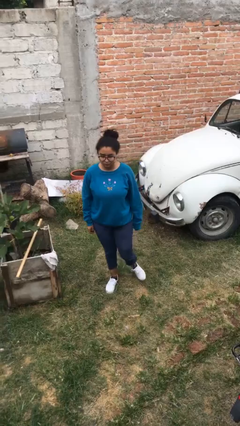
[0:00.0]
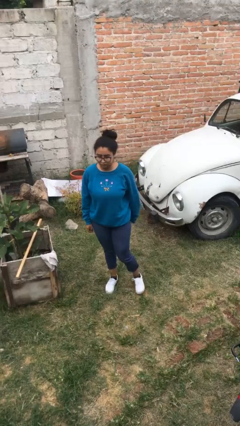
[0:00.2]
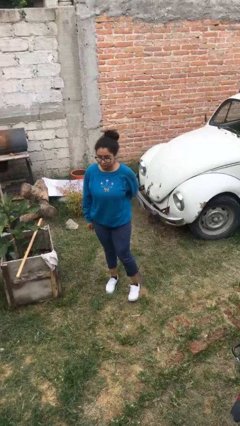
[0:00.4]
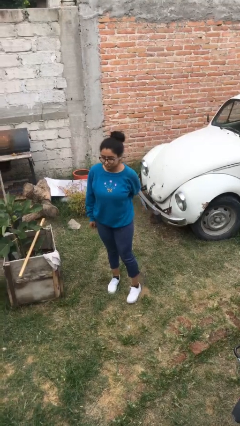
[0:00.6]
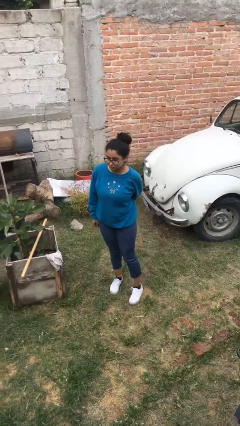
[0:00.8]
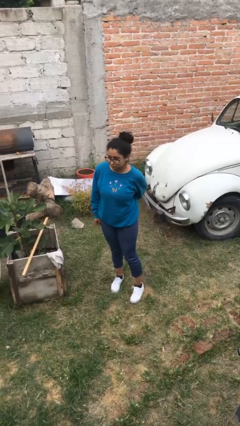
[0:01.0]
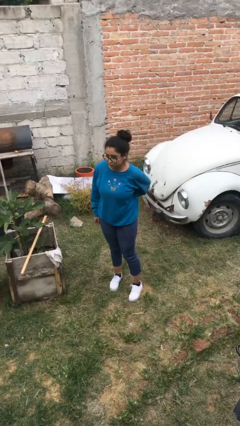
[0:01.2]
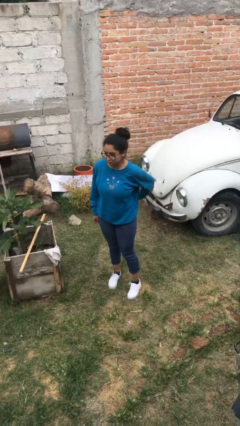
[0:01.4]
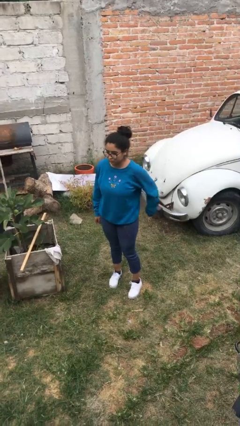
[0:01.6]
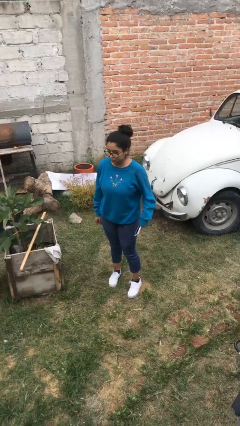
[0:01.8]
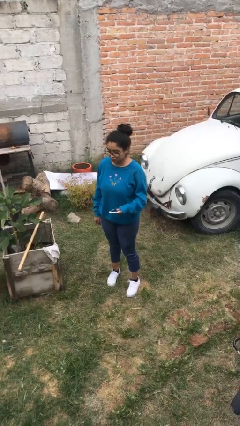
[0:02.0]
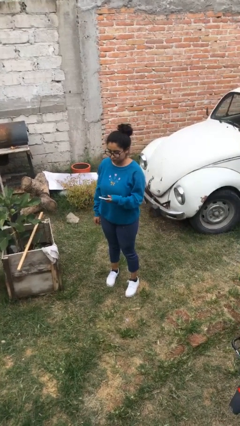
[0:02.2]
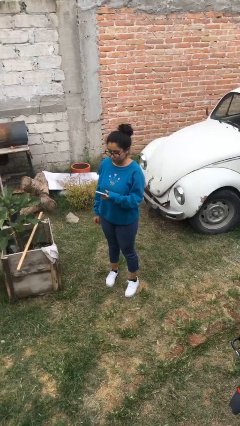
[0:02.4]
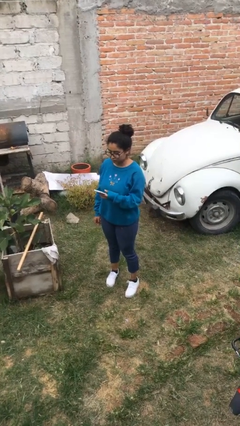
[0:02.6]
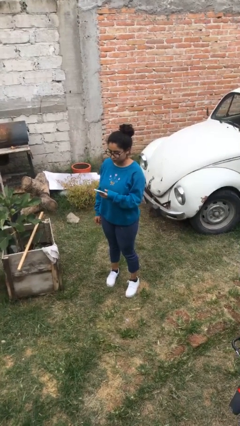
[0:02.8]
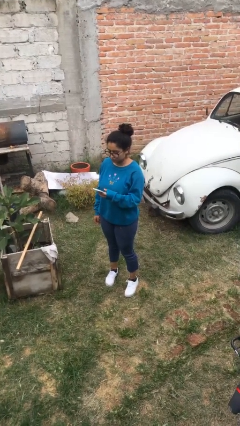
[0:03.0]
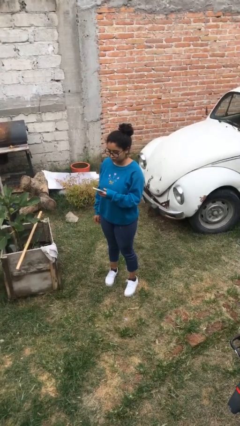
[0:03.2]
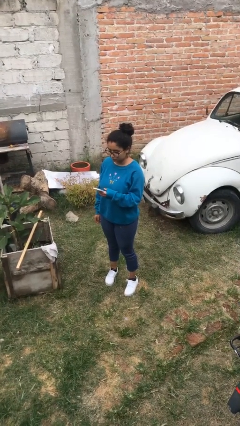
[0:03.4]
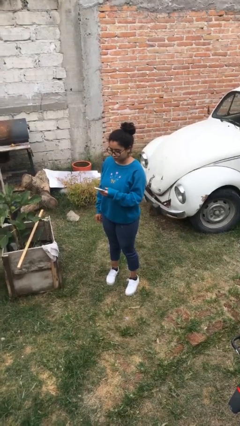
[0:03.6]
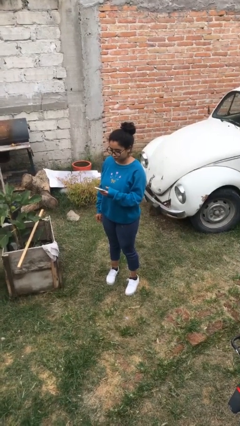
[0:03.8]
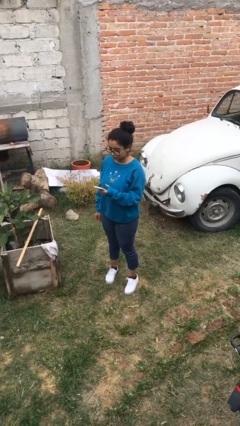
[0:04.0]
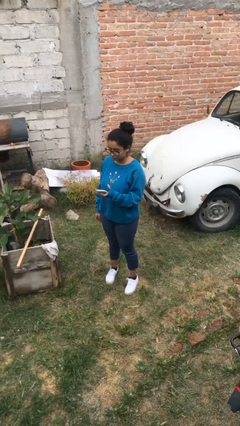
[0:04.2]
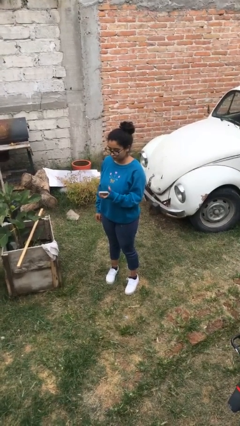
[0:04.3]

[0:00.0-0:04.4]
person takes phone from pocket

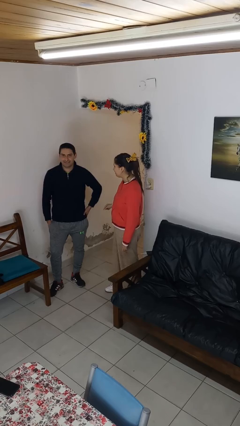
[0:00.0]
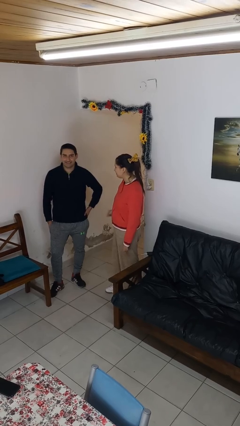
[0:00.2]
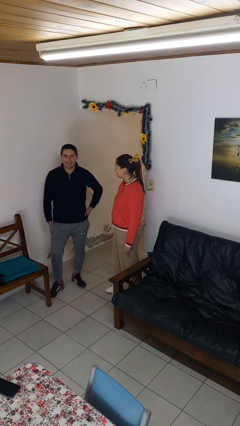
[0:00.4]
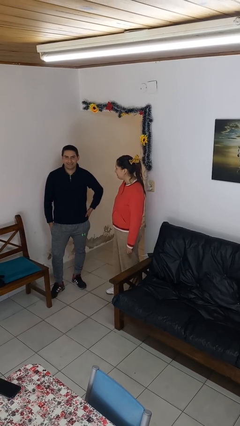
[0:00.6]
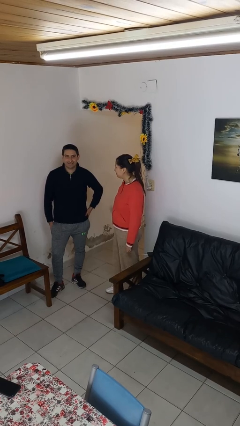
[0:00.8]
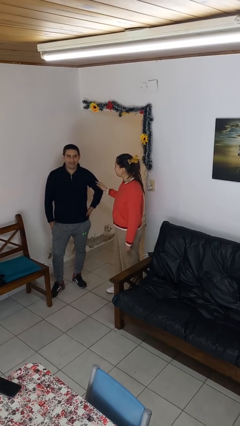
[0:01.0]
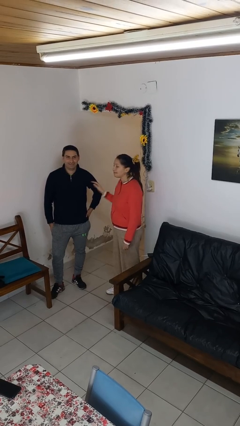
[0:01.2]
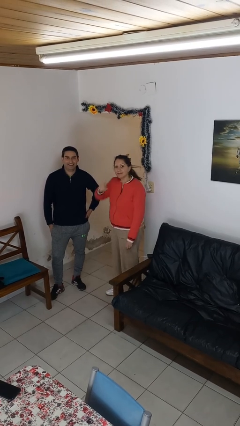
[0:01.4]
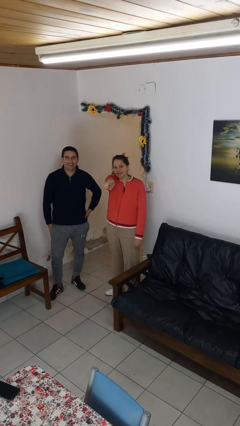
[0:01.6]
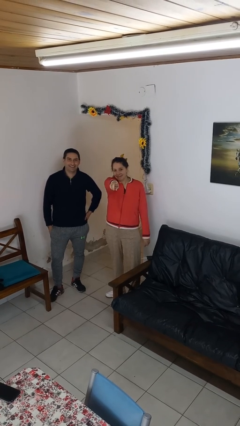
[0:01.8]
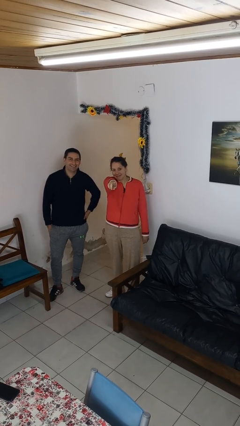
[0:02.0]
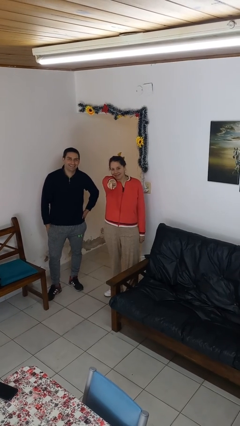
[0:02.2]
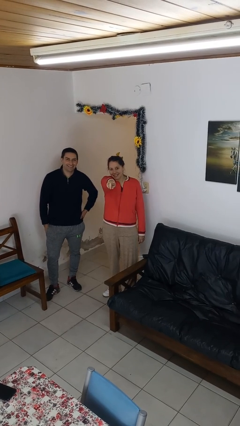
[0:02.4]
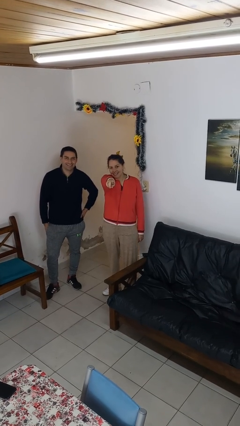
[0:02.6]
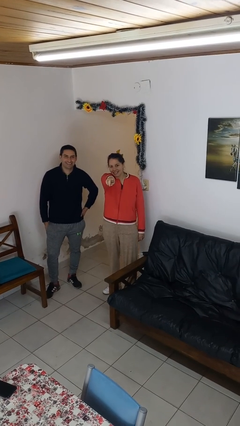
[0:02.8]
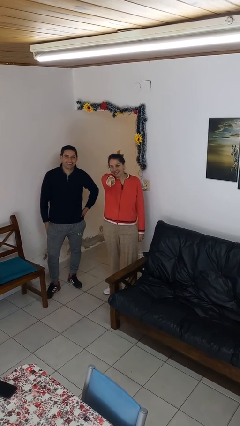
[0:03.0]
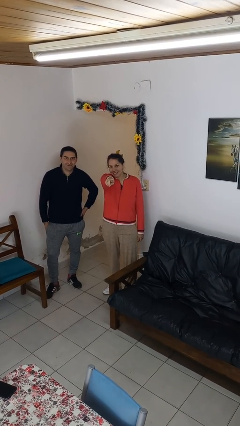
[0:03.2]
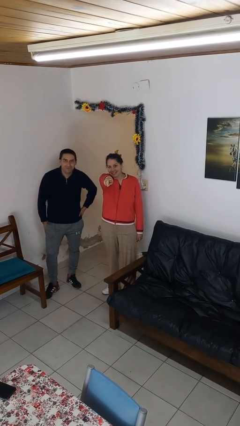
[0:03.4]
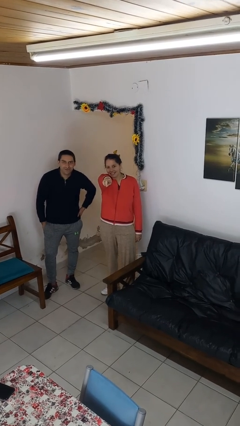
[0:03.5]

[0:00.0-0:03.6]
person points at person

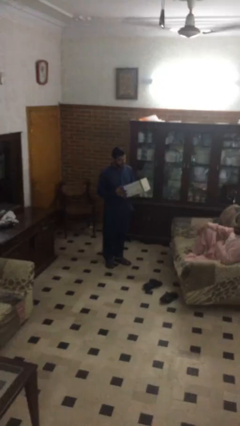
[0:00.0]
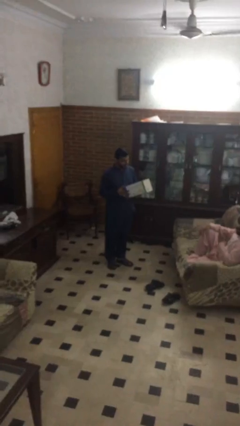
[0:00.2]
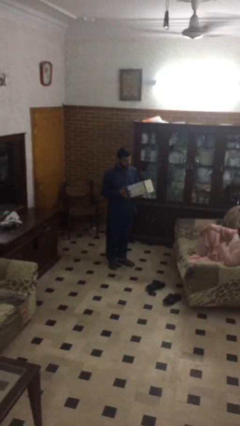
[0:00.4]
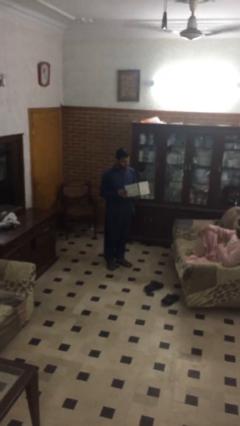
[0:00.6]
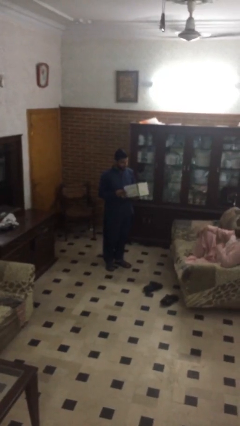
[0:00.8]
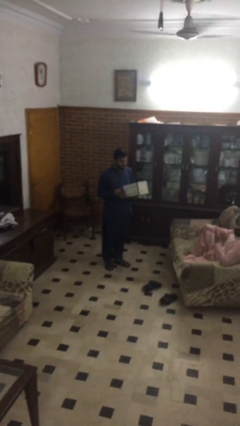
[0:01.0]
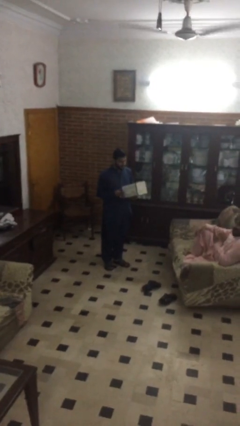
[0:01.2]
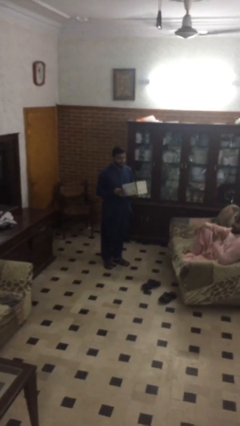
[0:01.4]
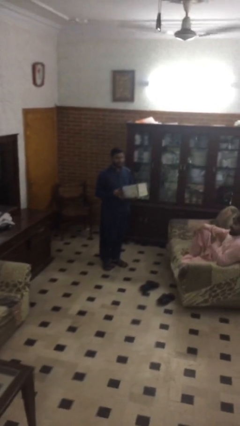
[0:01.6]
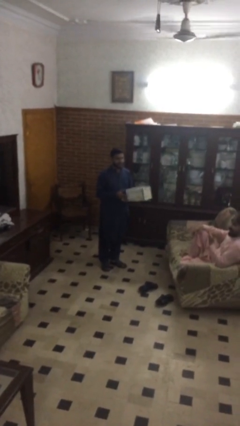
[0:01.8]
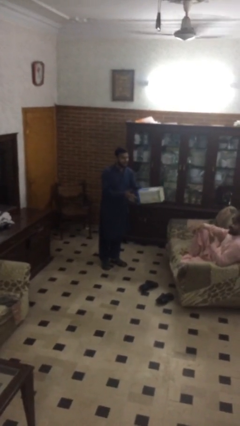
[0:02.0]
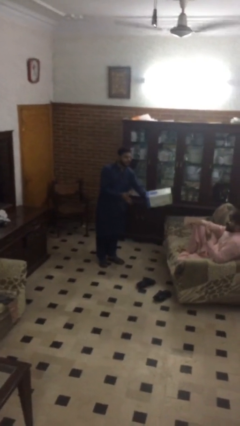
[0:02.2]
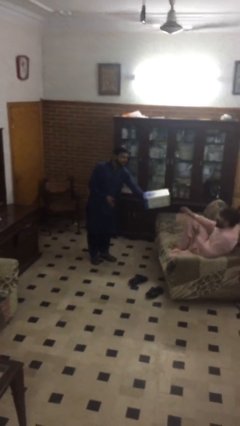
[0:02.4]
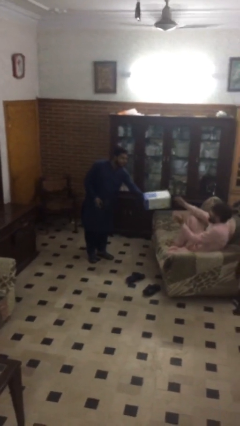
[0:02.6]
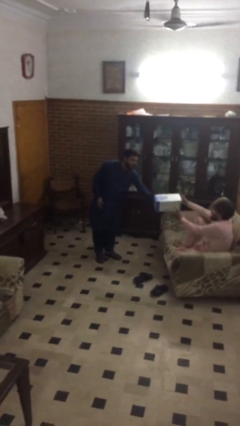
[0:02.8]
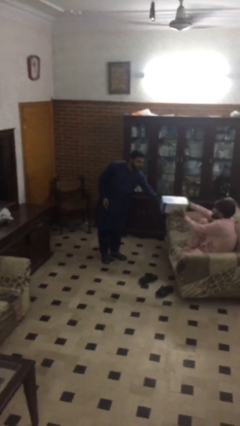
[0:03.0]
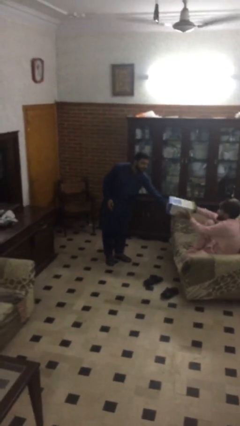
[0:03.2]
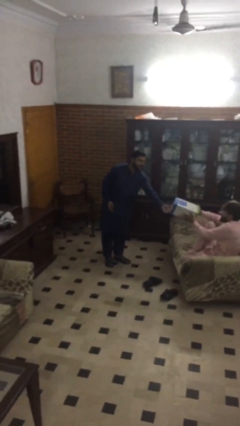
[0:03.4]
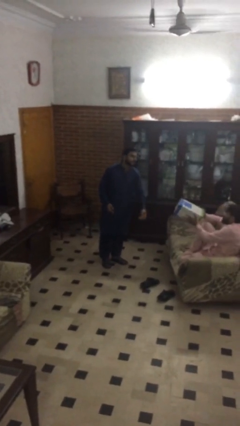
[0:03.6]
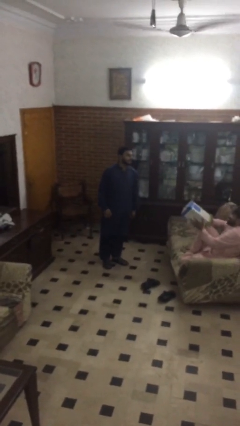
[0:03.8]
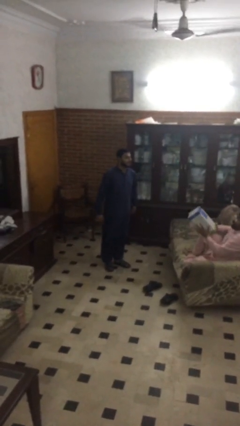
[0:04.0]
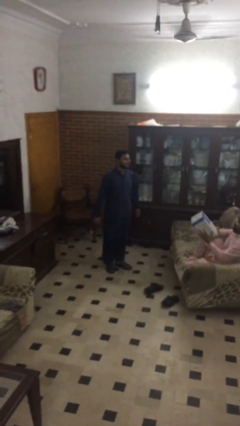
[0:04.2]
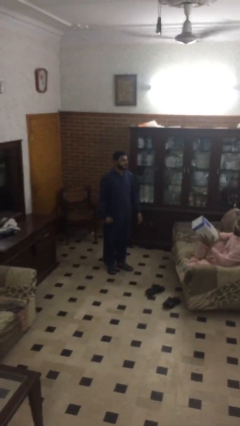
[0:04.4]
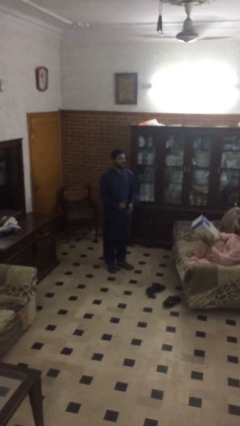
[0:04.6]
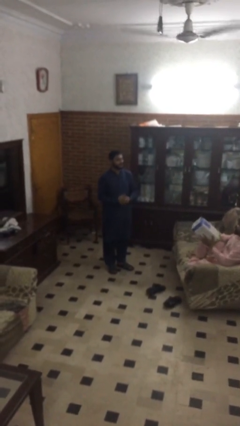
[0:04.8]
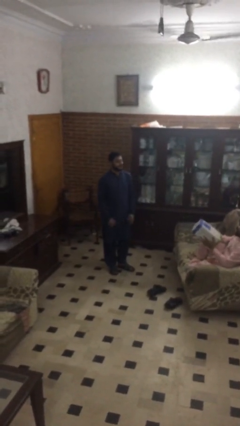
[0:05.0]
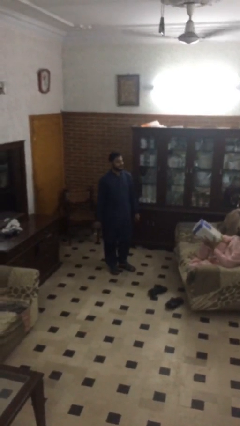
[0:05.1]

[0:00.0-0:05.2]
person transfers object to person

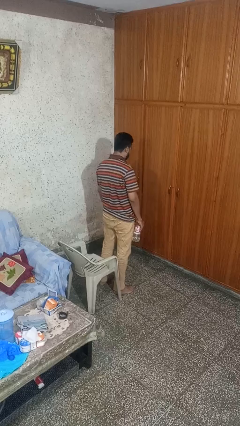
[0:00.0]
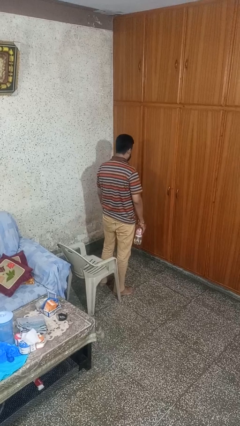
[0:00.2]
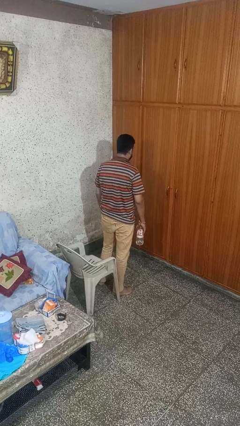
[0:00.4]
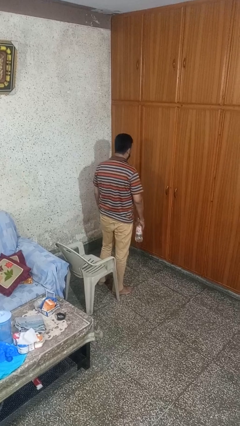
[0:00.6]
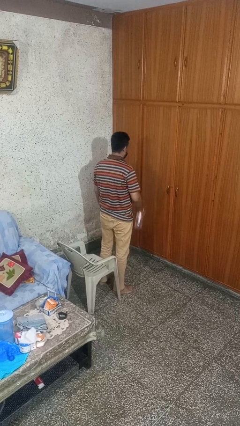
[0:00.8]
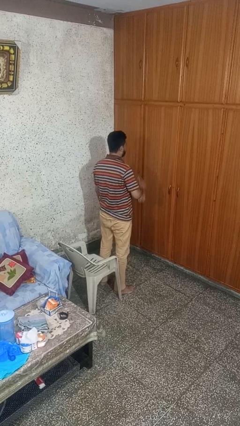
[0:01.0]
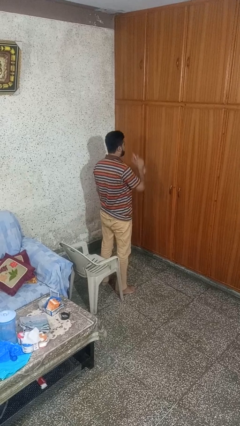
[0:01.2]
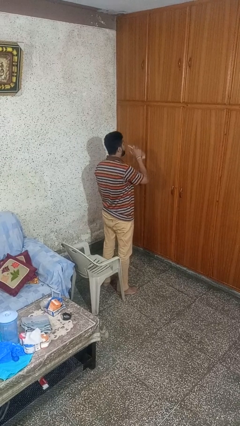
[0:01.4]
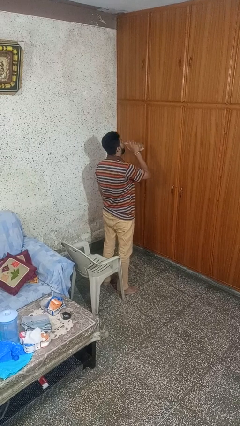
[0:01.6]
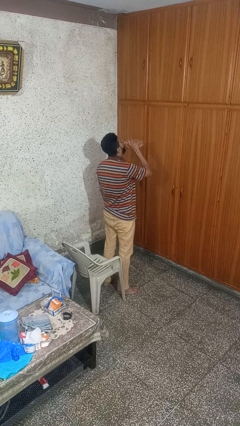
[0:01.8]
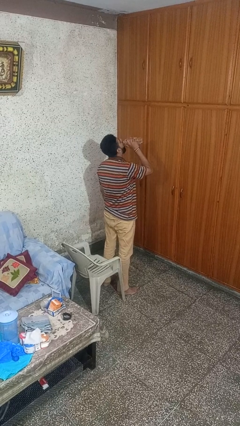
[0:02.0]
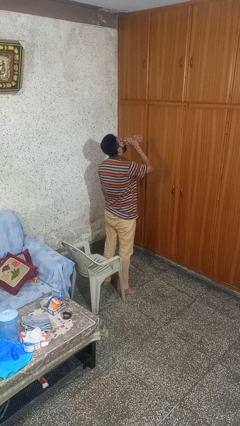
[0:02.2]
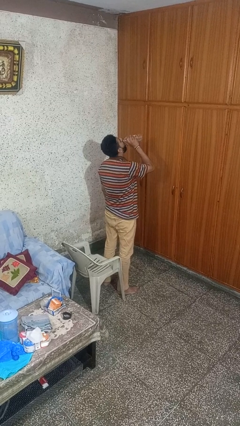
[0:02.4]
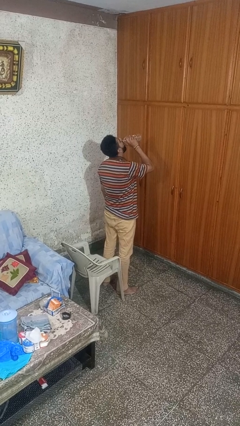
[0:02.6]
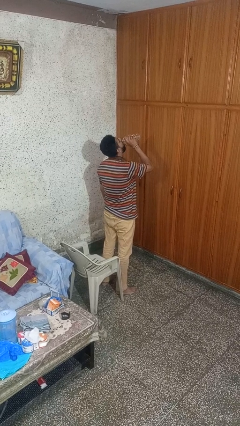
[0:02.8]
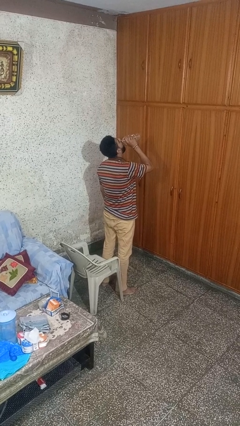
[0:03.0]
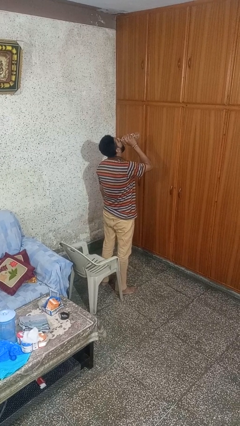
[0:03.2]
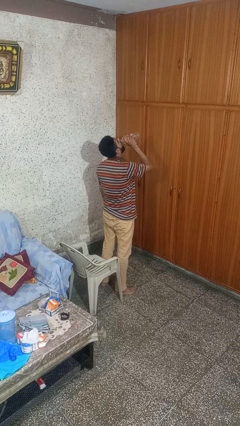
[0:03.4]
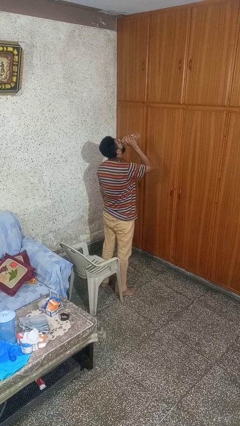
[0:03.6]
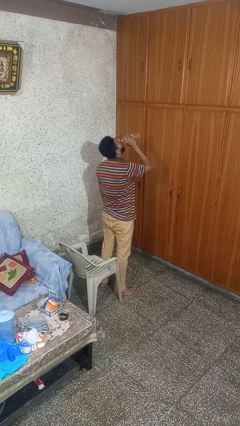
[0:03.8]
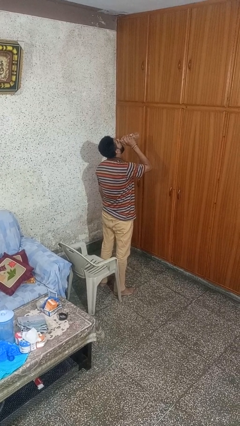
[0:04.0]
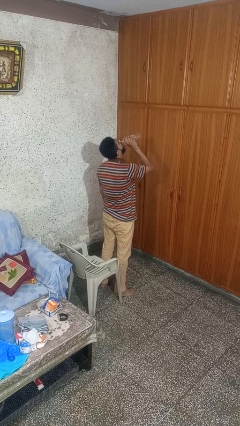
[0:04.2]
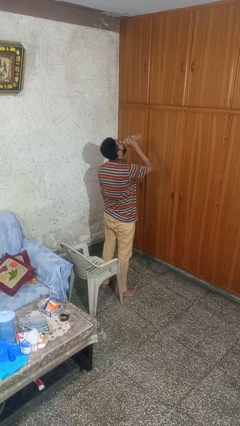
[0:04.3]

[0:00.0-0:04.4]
person drinks from bottle

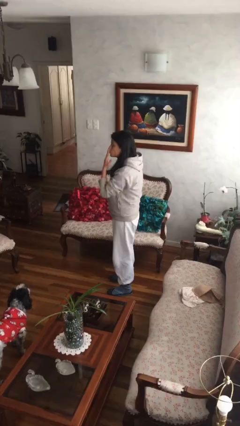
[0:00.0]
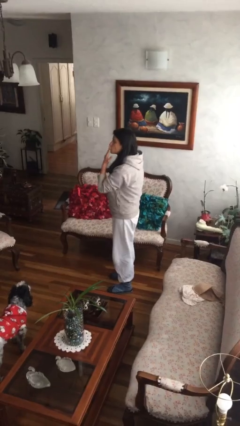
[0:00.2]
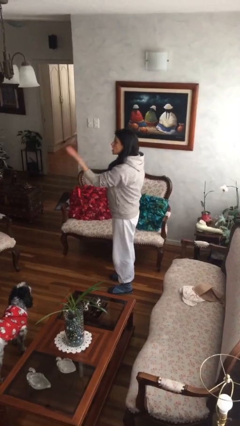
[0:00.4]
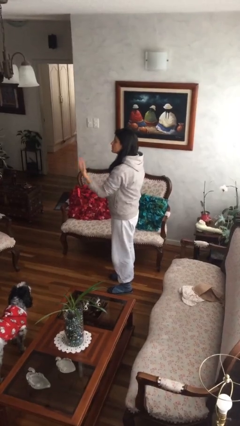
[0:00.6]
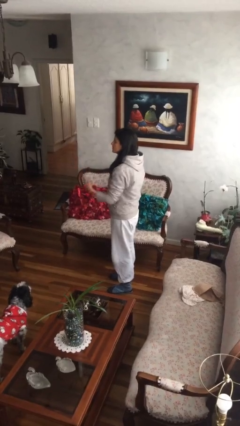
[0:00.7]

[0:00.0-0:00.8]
person gestures blow kiss
